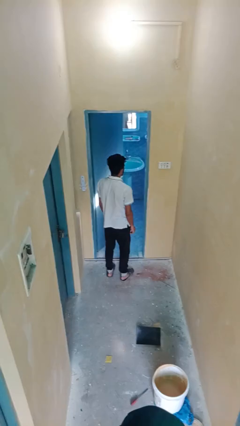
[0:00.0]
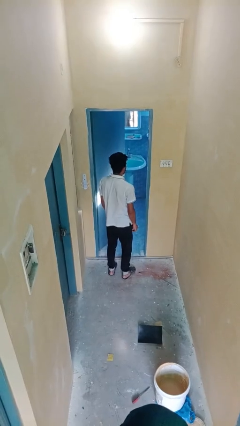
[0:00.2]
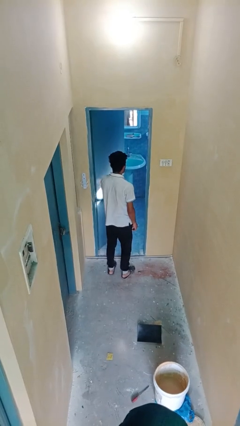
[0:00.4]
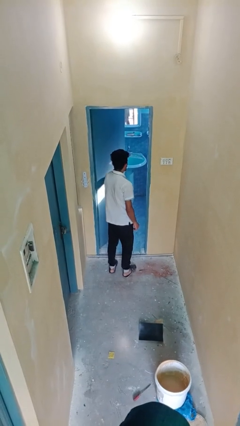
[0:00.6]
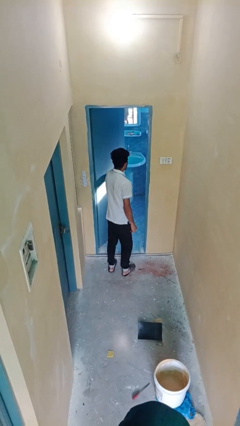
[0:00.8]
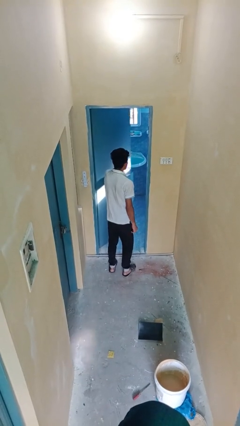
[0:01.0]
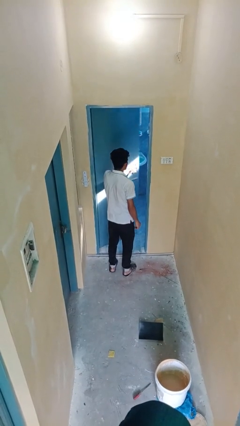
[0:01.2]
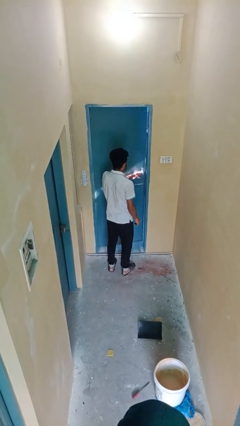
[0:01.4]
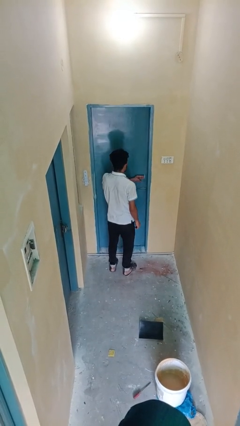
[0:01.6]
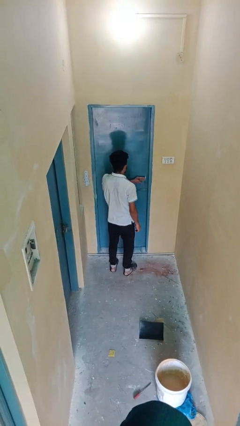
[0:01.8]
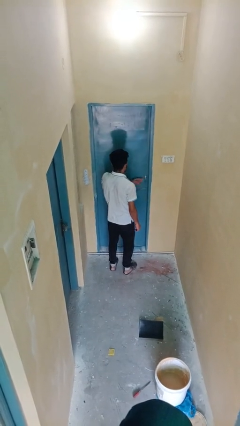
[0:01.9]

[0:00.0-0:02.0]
person closes facility door

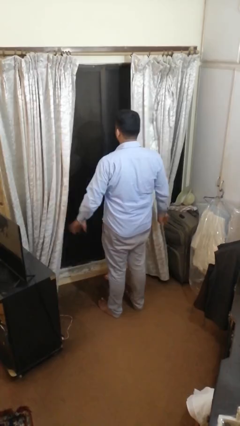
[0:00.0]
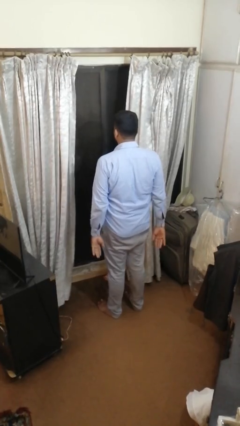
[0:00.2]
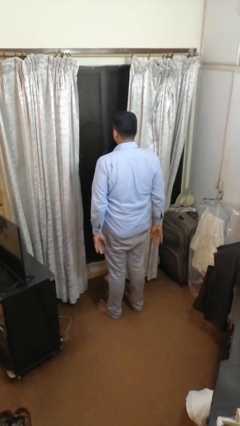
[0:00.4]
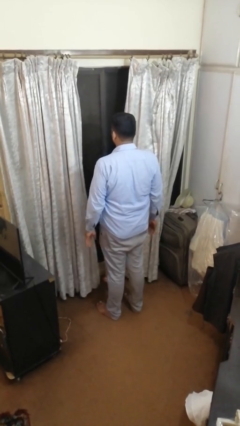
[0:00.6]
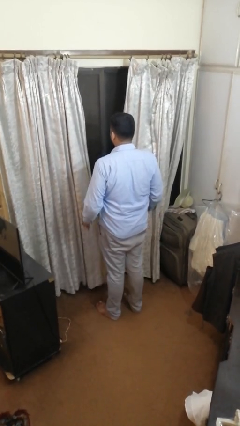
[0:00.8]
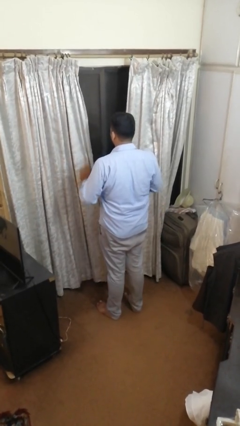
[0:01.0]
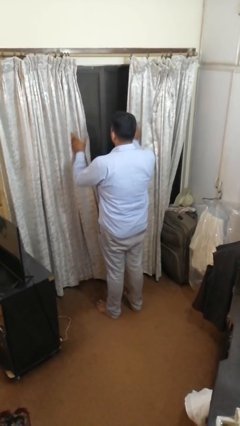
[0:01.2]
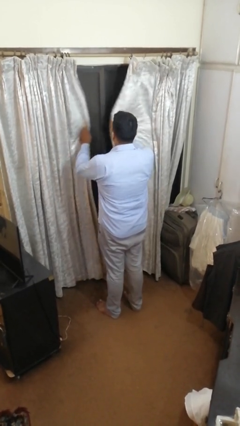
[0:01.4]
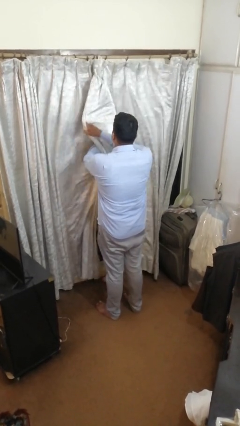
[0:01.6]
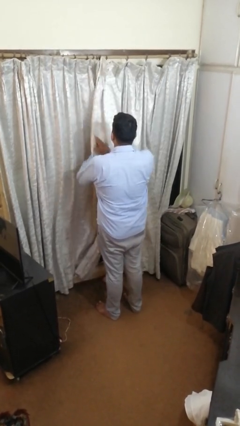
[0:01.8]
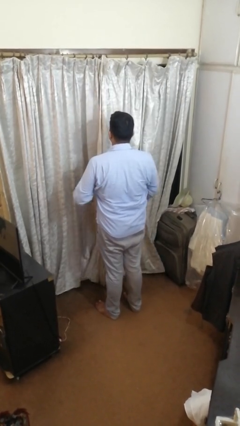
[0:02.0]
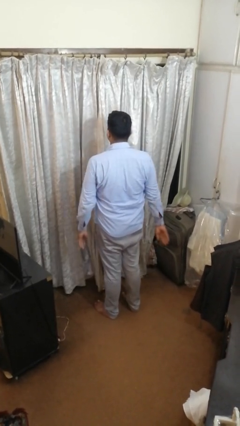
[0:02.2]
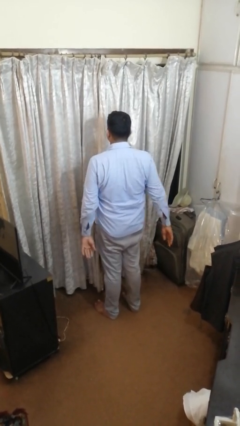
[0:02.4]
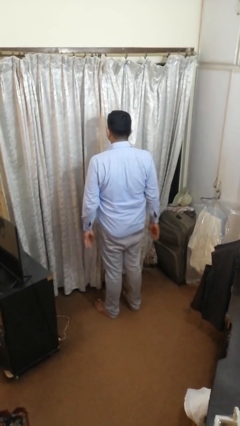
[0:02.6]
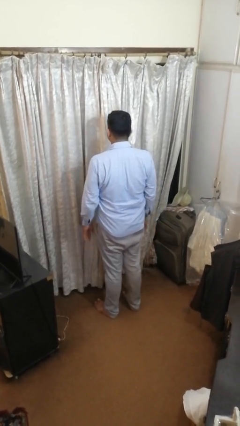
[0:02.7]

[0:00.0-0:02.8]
person closes curtains

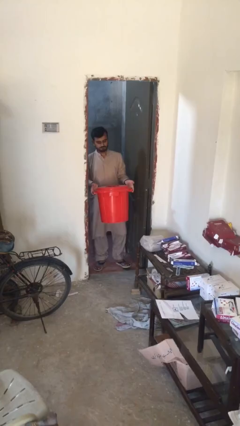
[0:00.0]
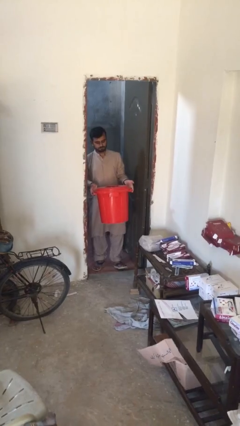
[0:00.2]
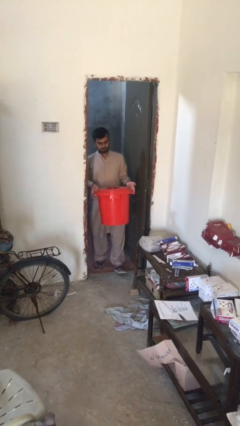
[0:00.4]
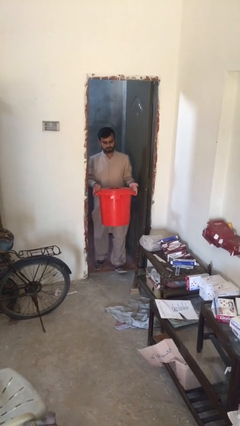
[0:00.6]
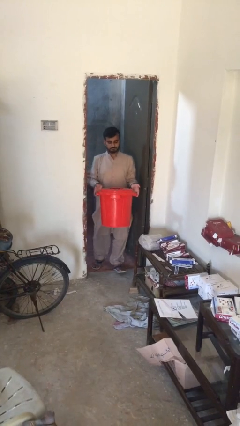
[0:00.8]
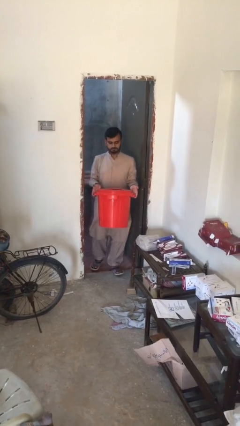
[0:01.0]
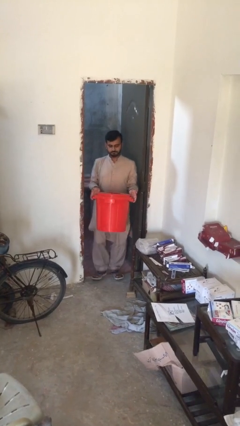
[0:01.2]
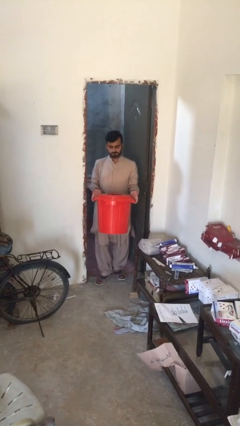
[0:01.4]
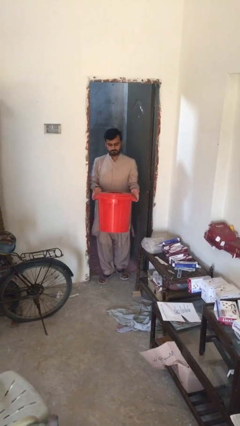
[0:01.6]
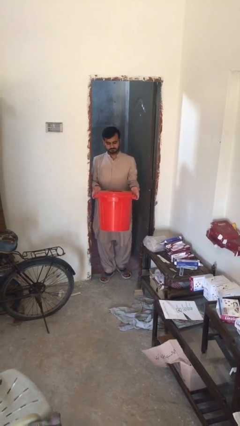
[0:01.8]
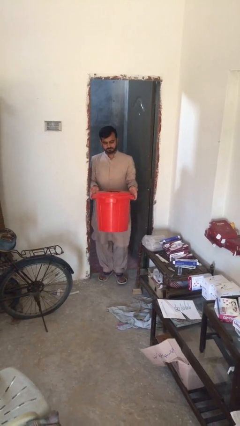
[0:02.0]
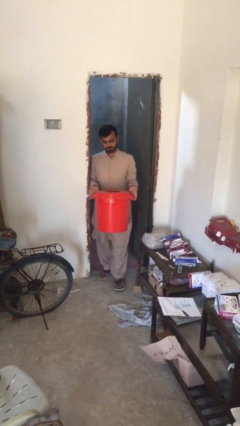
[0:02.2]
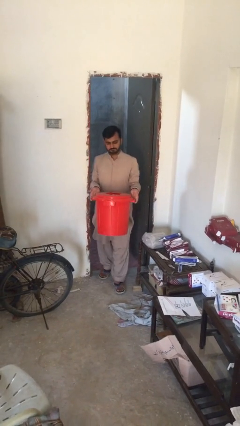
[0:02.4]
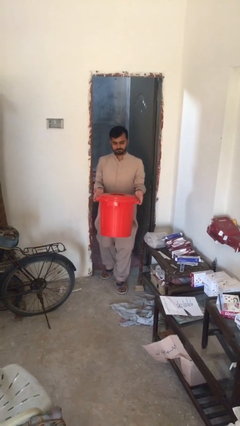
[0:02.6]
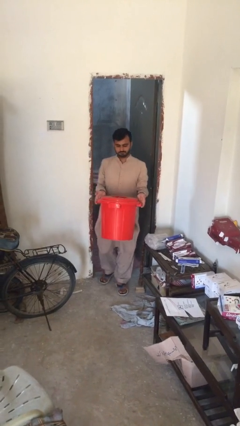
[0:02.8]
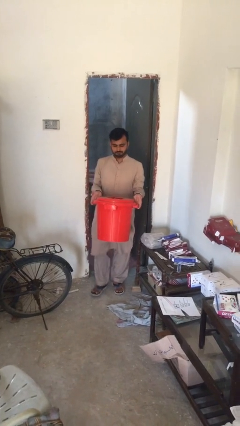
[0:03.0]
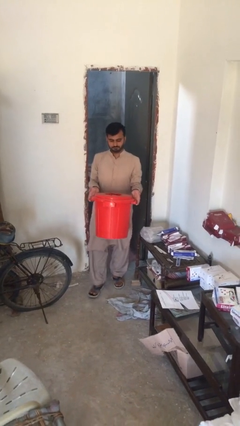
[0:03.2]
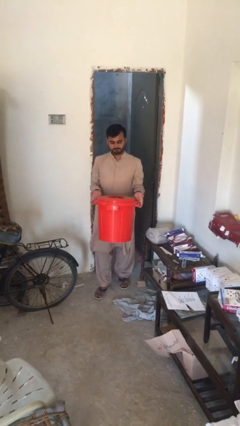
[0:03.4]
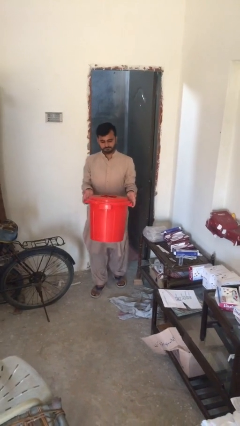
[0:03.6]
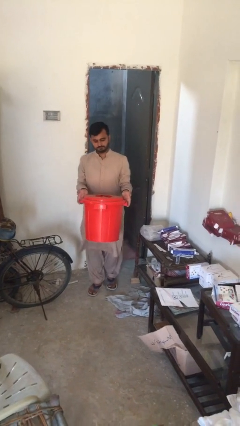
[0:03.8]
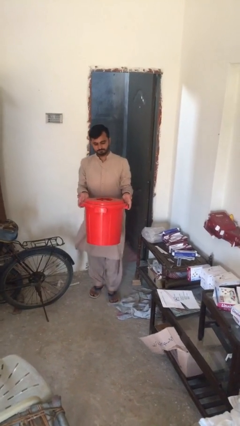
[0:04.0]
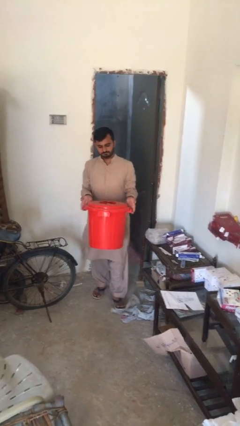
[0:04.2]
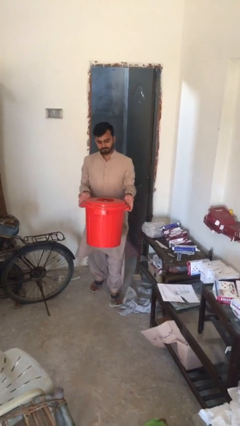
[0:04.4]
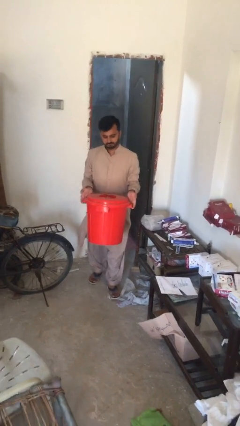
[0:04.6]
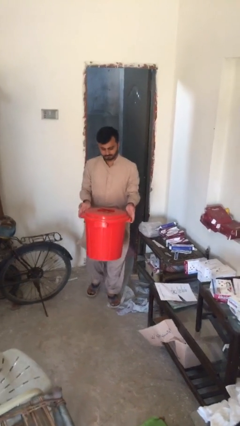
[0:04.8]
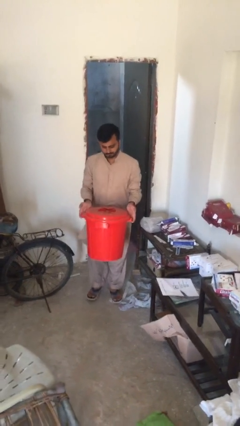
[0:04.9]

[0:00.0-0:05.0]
person carries heavy object

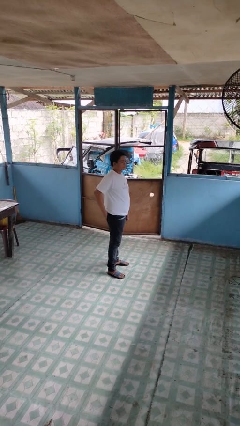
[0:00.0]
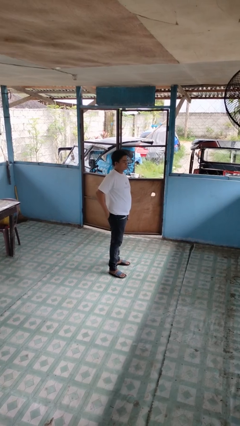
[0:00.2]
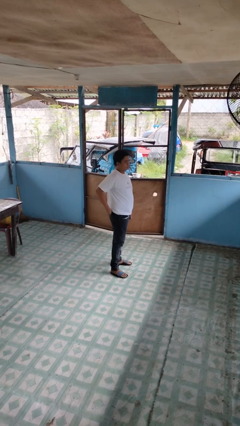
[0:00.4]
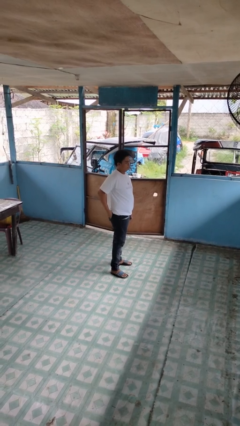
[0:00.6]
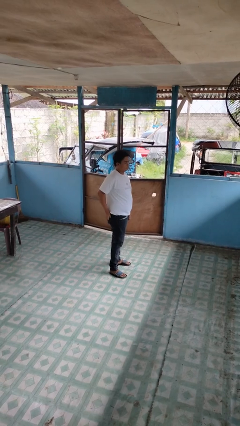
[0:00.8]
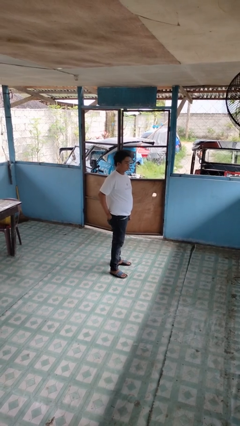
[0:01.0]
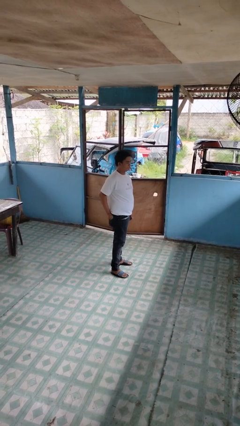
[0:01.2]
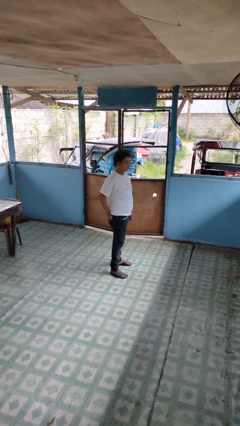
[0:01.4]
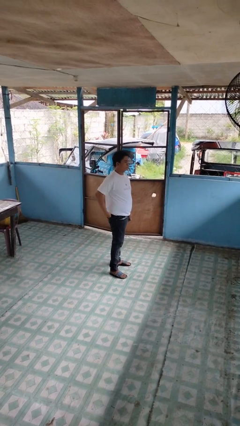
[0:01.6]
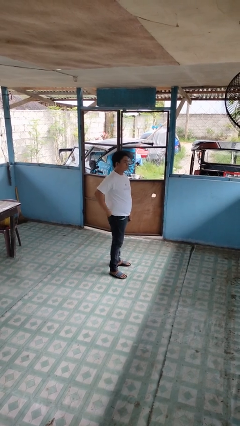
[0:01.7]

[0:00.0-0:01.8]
person puts hands in back pockets

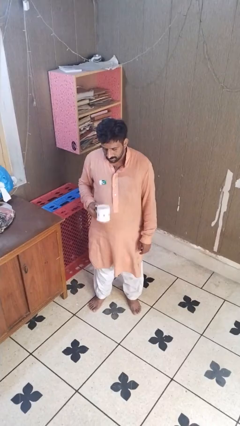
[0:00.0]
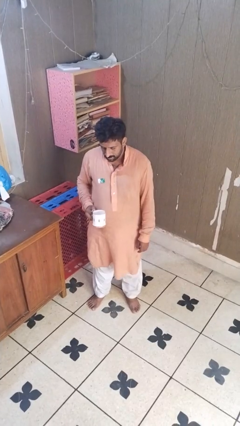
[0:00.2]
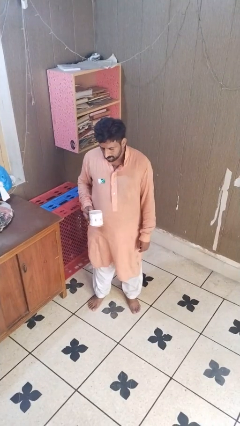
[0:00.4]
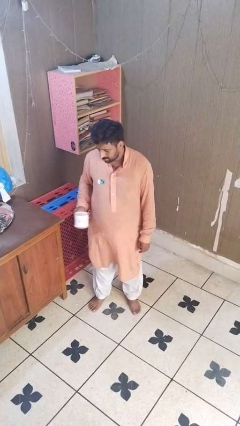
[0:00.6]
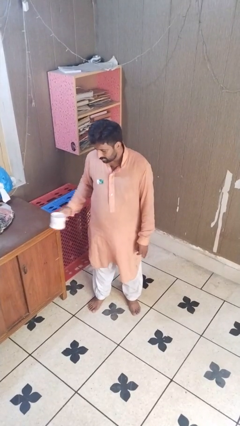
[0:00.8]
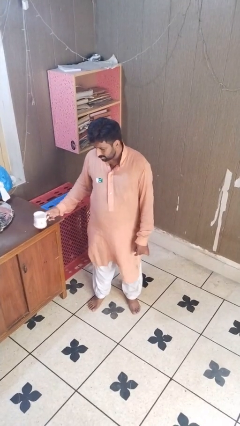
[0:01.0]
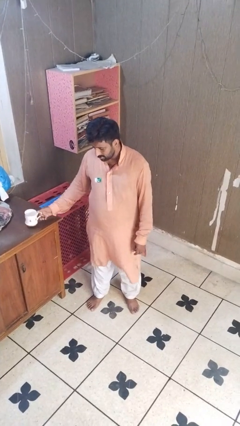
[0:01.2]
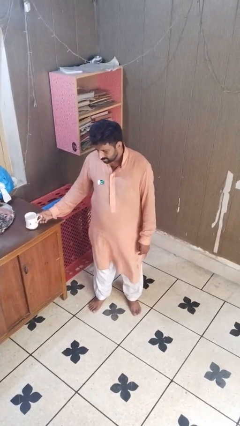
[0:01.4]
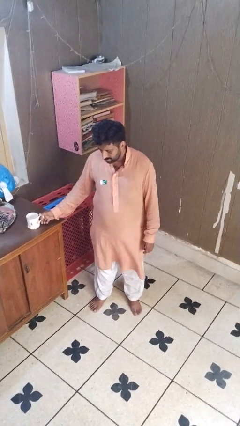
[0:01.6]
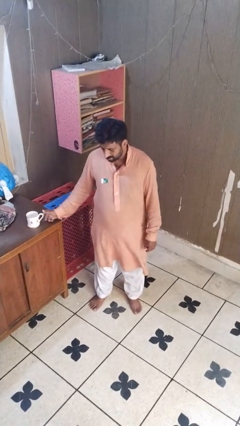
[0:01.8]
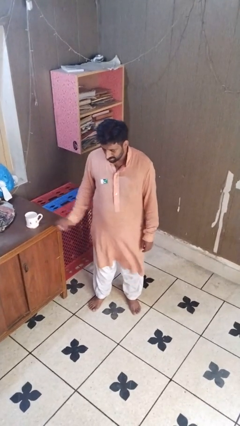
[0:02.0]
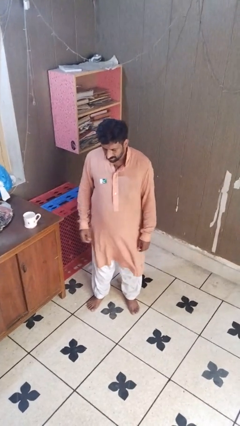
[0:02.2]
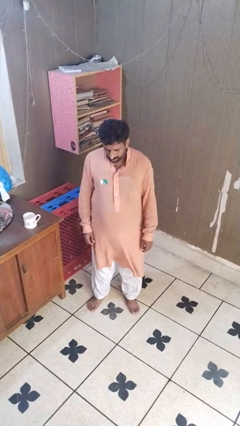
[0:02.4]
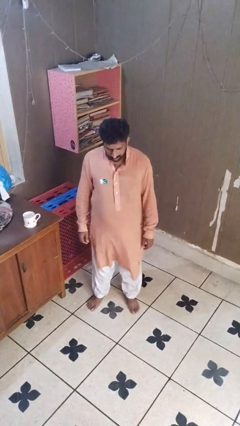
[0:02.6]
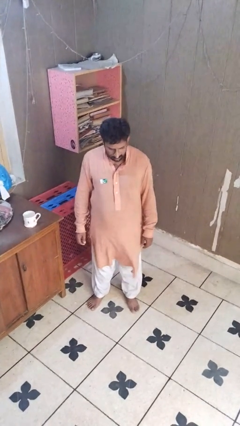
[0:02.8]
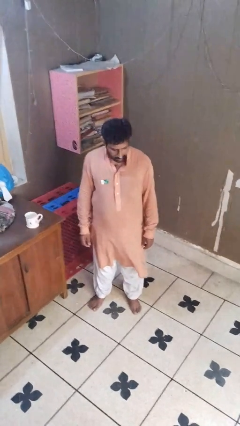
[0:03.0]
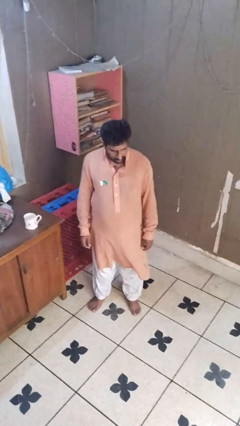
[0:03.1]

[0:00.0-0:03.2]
person puts down object on table

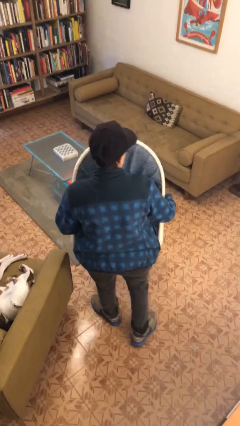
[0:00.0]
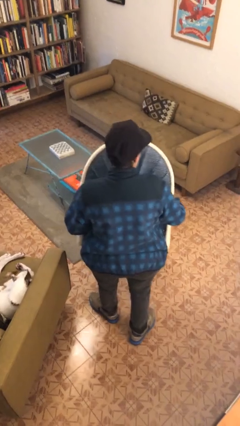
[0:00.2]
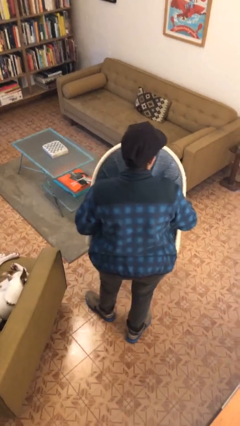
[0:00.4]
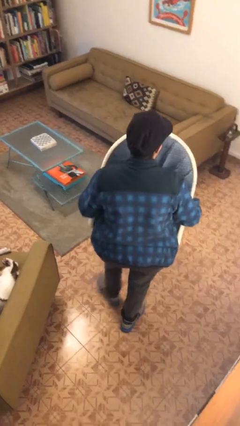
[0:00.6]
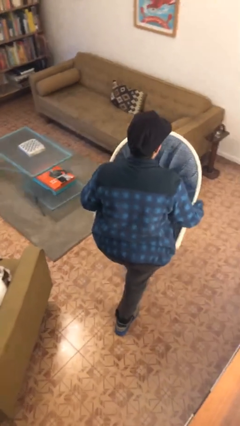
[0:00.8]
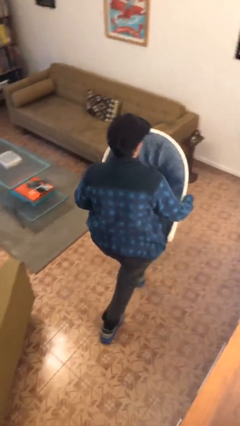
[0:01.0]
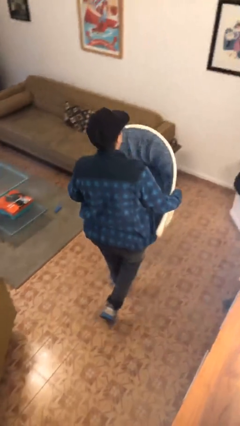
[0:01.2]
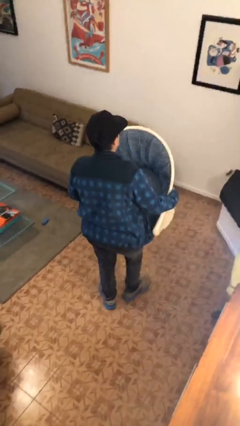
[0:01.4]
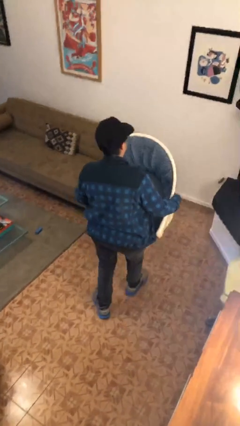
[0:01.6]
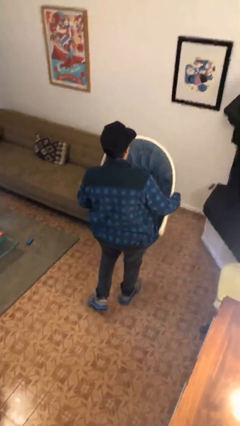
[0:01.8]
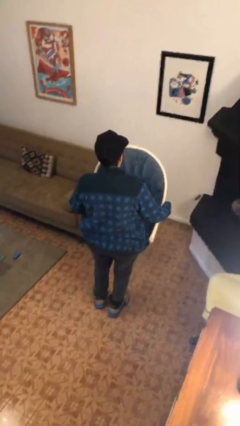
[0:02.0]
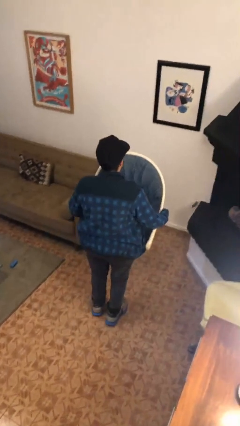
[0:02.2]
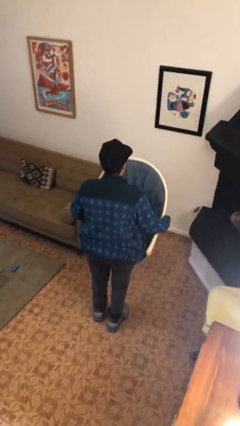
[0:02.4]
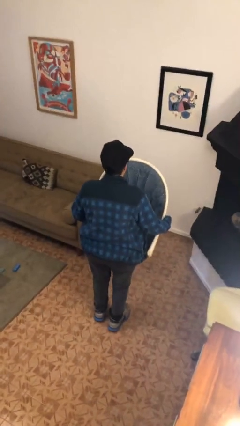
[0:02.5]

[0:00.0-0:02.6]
person carries furniture
